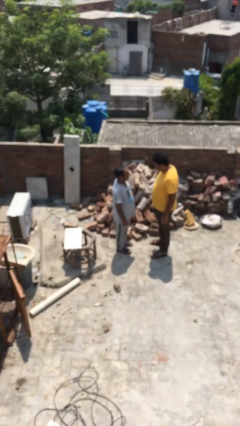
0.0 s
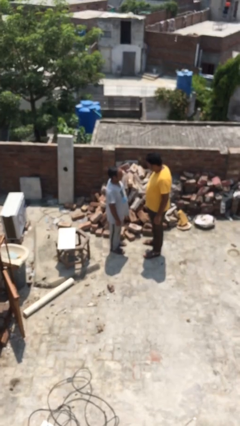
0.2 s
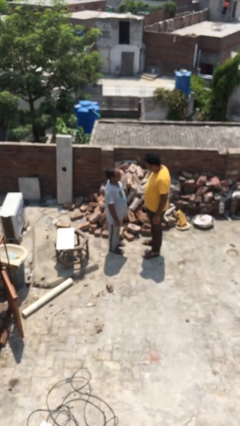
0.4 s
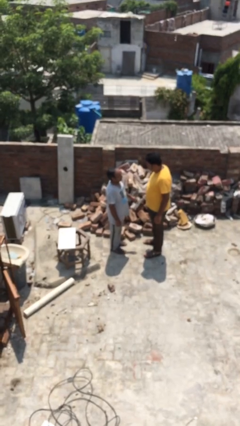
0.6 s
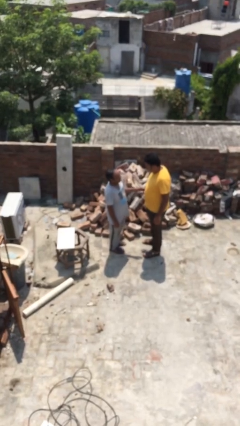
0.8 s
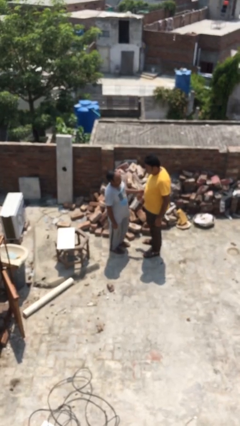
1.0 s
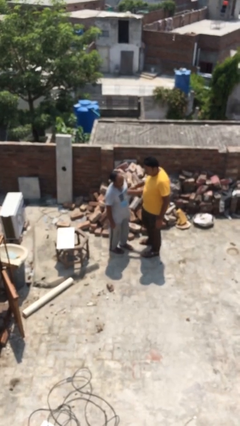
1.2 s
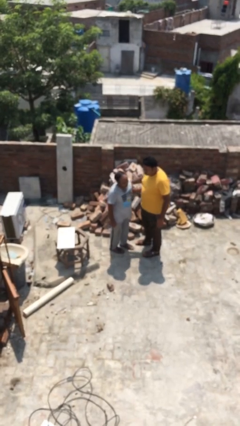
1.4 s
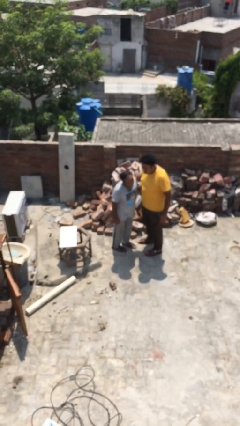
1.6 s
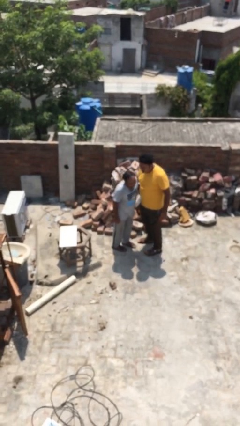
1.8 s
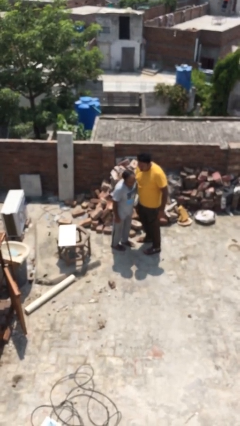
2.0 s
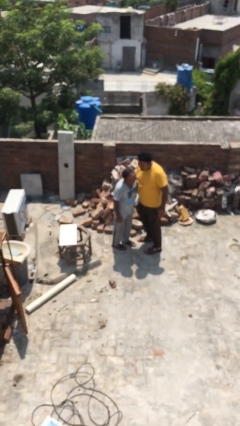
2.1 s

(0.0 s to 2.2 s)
person embraces person

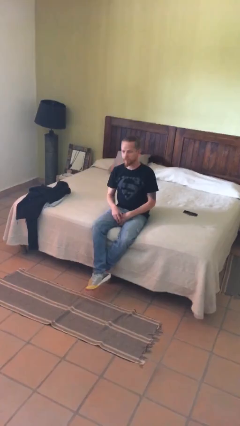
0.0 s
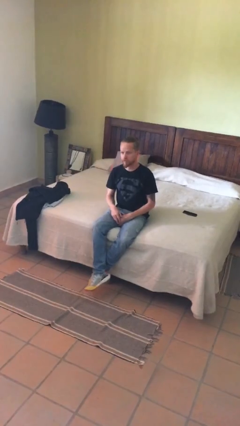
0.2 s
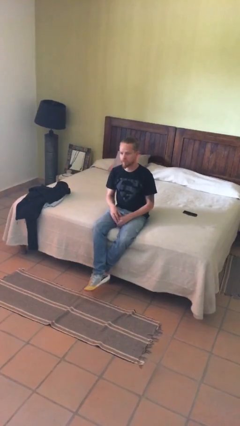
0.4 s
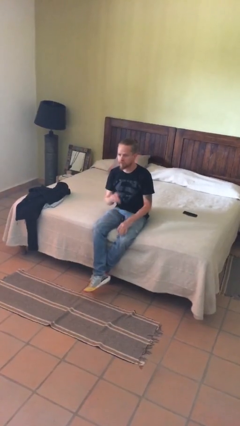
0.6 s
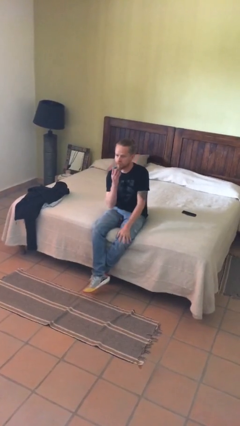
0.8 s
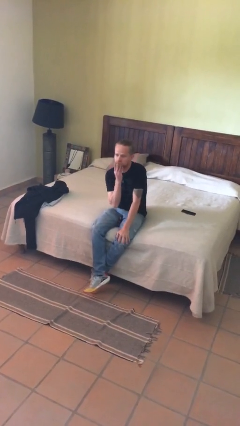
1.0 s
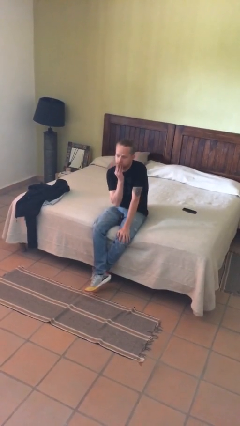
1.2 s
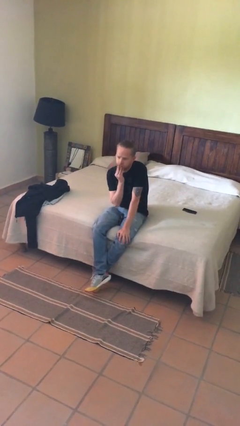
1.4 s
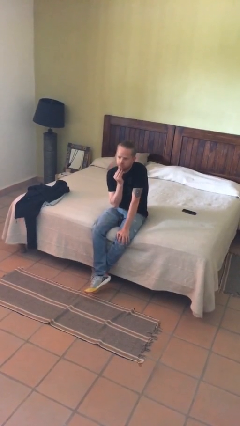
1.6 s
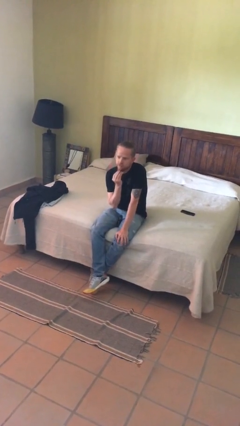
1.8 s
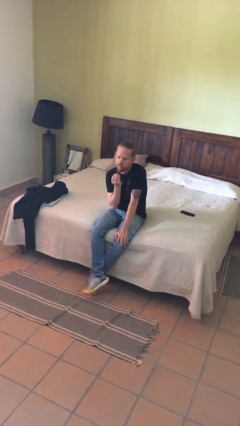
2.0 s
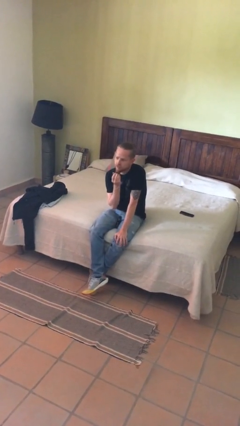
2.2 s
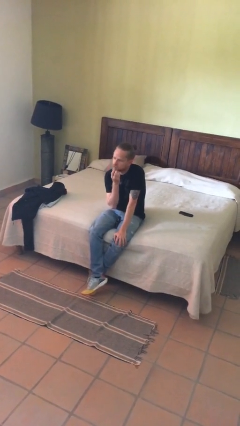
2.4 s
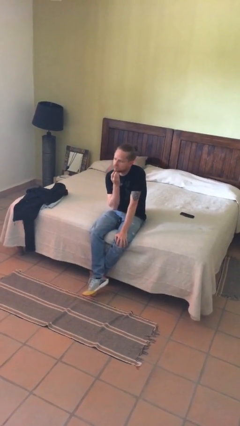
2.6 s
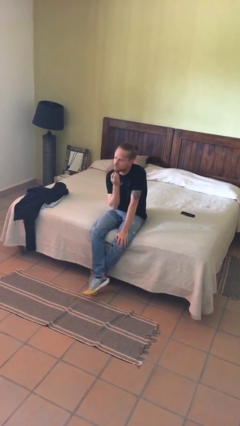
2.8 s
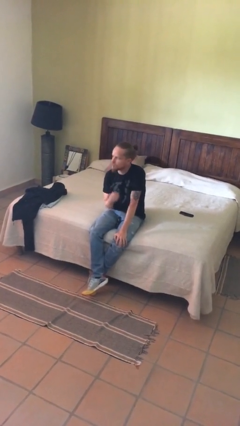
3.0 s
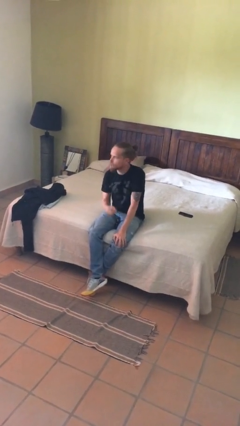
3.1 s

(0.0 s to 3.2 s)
person strokes chin

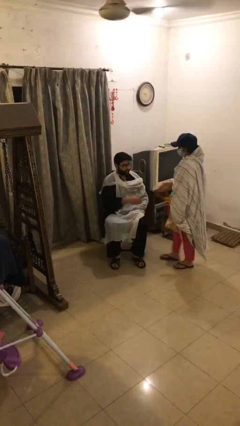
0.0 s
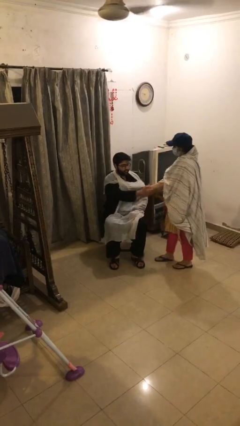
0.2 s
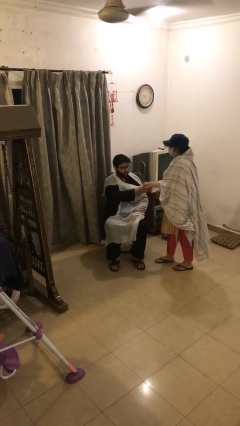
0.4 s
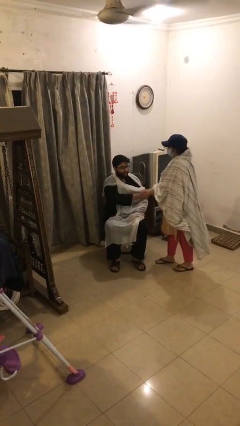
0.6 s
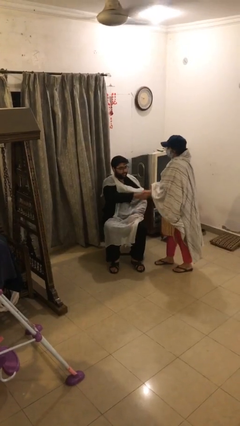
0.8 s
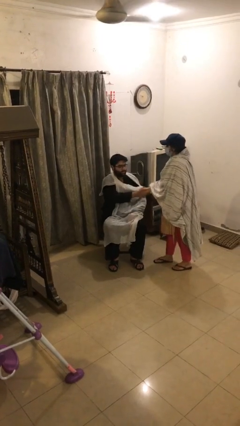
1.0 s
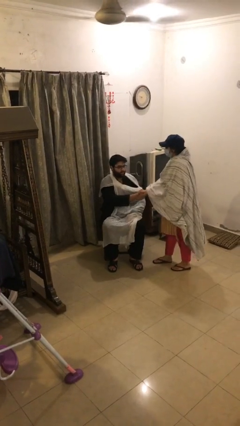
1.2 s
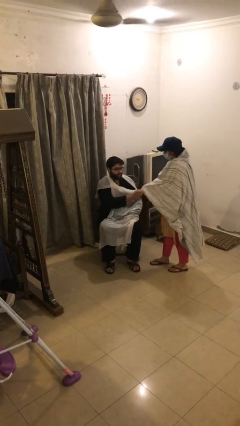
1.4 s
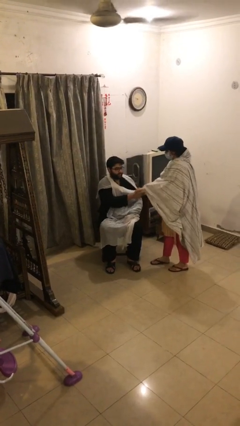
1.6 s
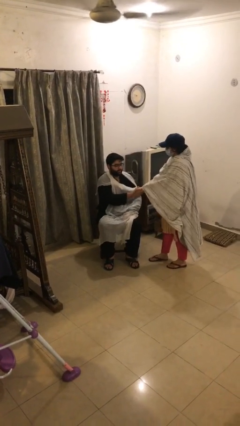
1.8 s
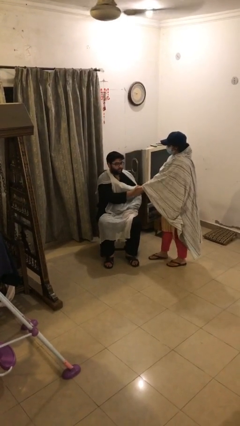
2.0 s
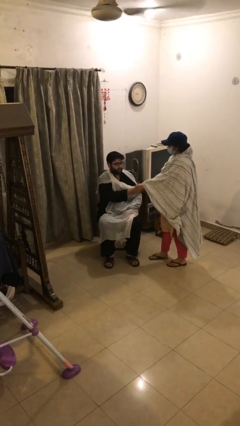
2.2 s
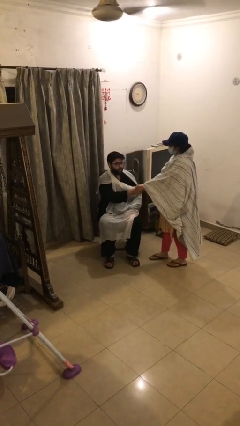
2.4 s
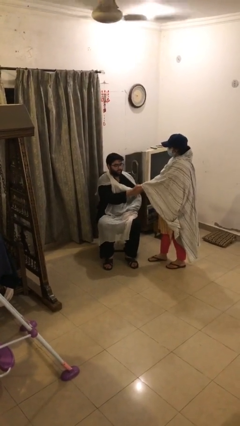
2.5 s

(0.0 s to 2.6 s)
person shakes hand

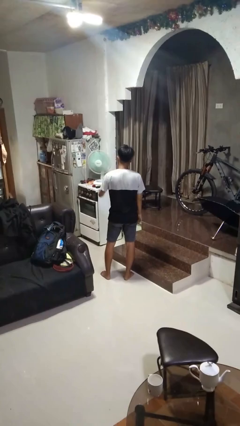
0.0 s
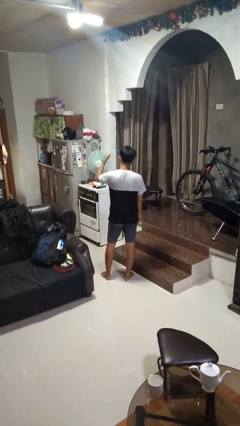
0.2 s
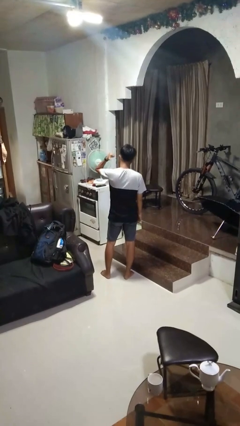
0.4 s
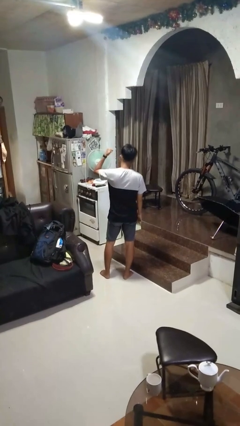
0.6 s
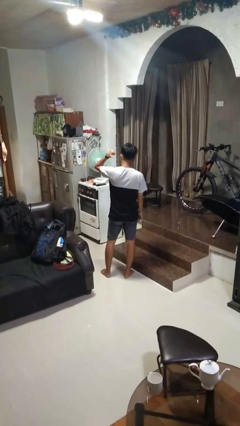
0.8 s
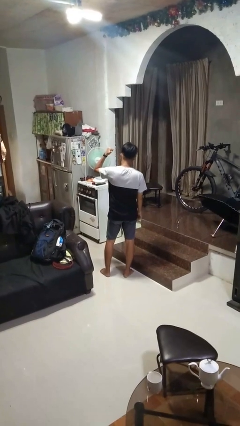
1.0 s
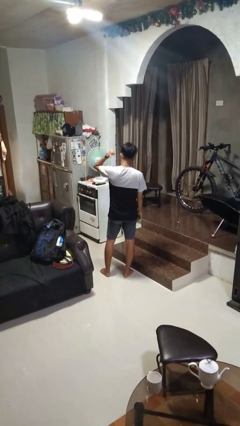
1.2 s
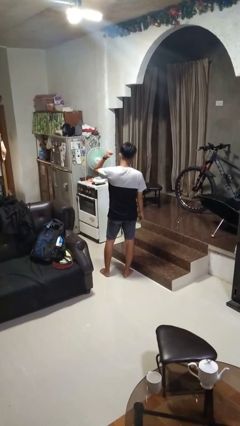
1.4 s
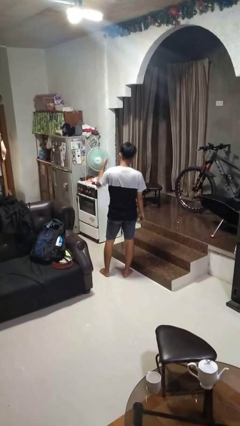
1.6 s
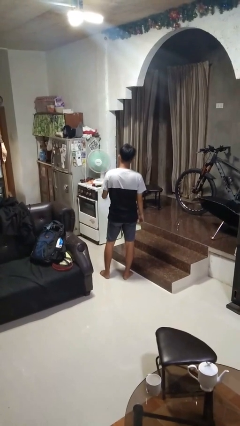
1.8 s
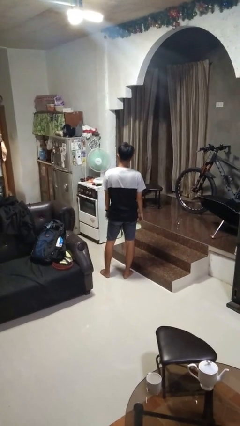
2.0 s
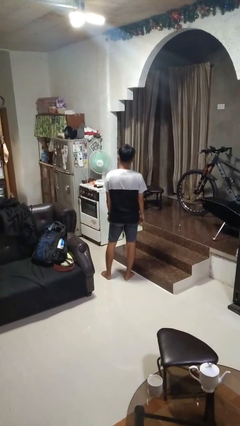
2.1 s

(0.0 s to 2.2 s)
person gestures behind me

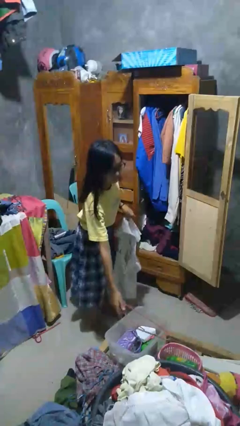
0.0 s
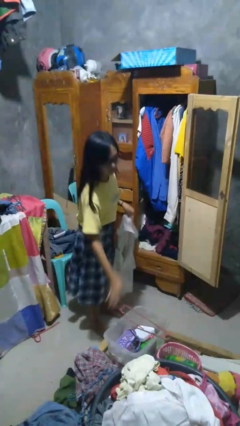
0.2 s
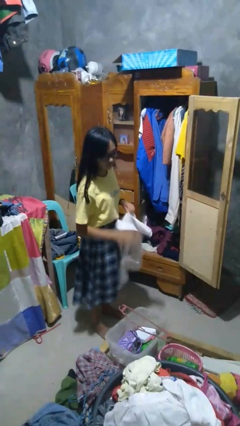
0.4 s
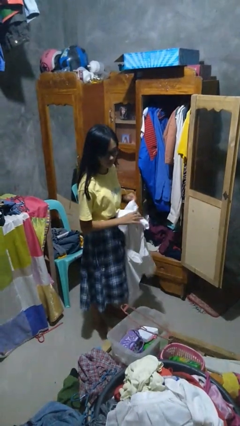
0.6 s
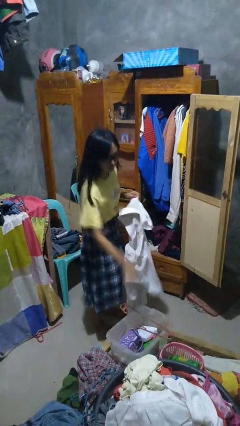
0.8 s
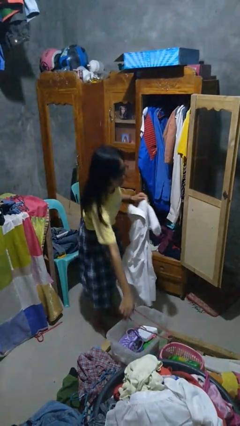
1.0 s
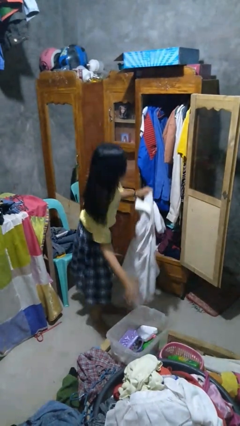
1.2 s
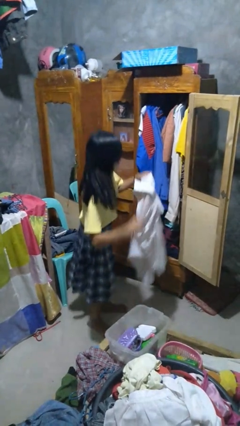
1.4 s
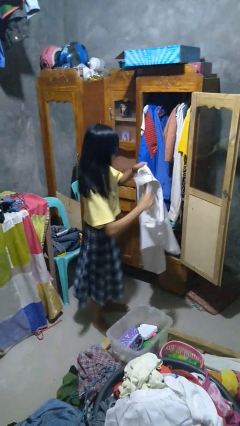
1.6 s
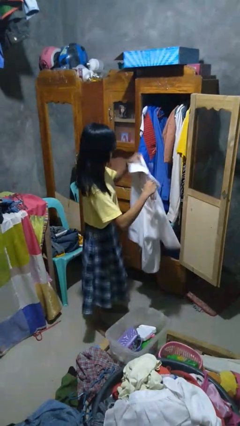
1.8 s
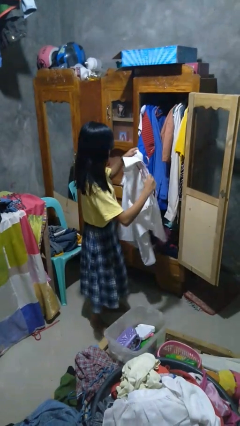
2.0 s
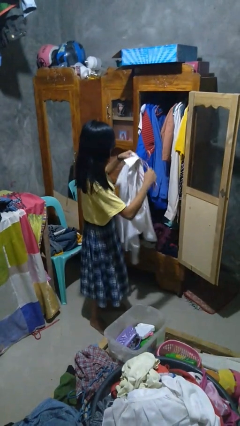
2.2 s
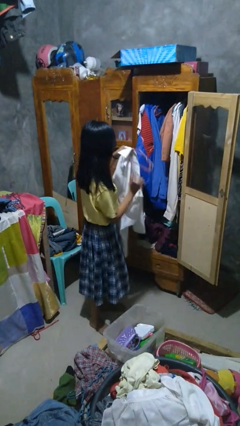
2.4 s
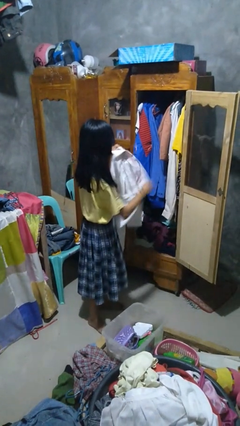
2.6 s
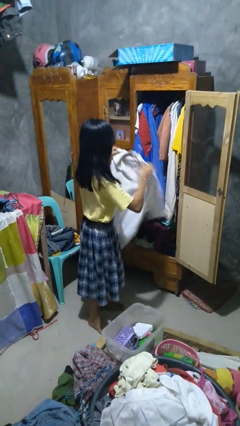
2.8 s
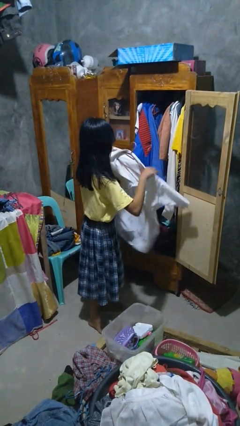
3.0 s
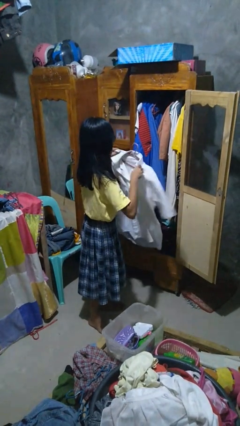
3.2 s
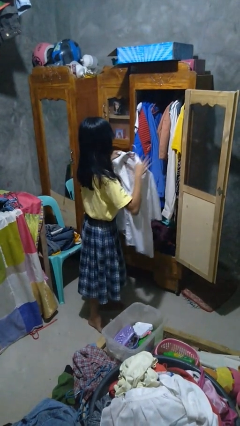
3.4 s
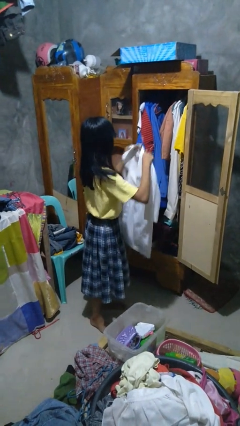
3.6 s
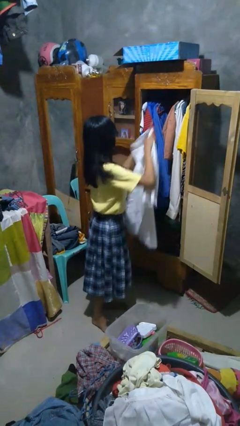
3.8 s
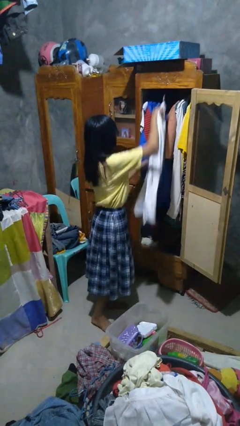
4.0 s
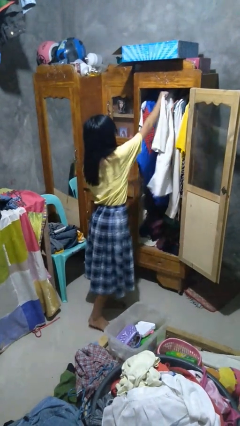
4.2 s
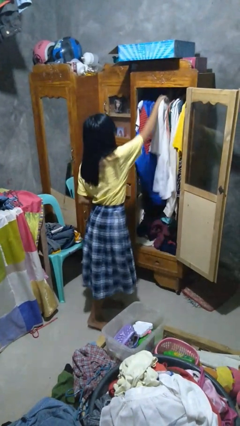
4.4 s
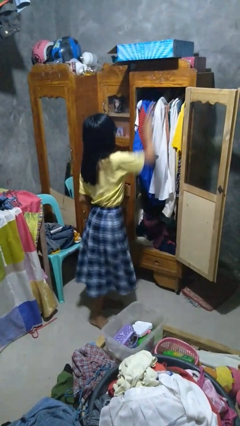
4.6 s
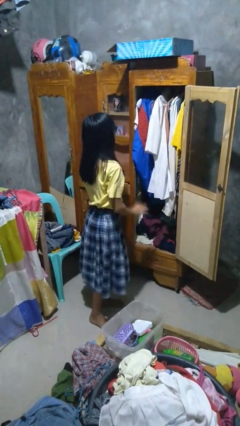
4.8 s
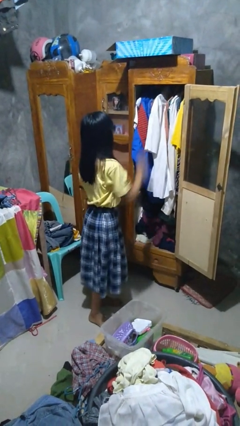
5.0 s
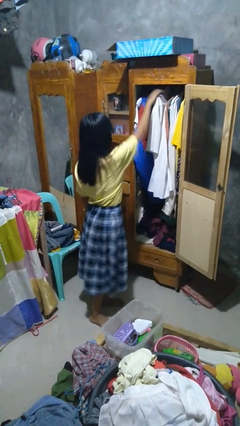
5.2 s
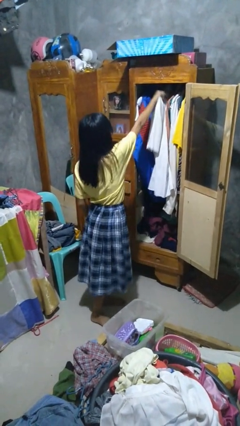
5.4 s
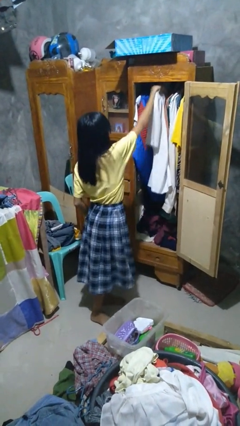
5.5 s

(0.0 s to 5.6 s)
person puts clothes into closet

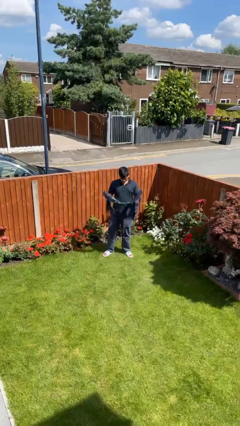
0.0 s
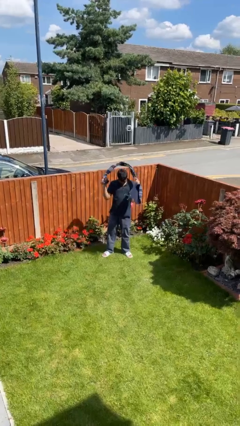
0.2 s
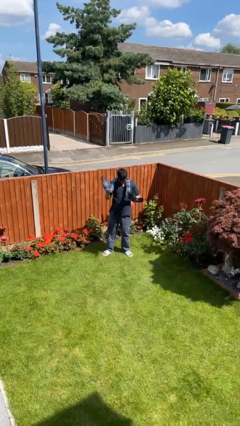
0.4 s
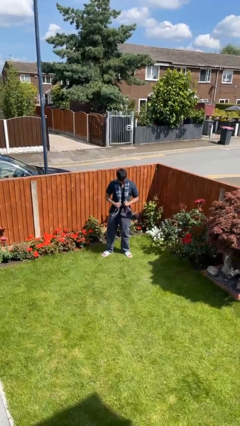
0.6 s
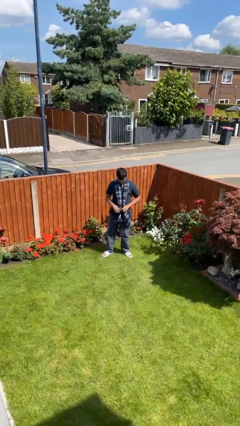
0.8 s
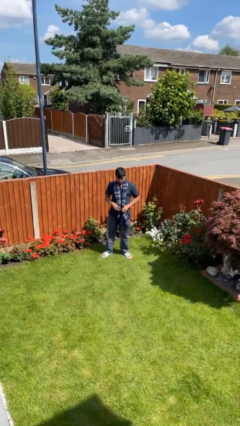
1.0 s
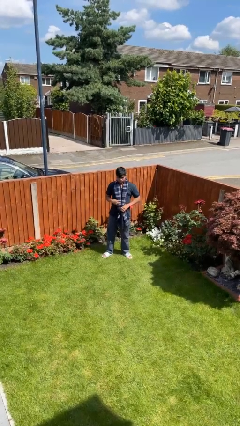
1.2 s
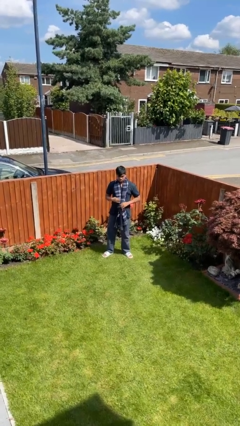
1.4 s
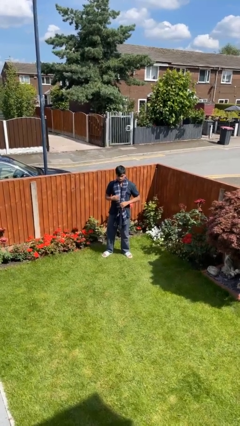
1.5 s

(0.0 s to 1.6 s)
person puts on scarf

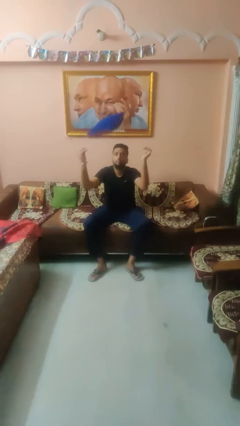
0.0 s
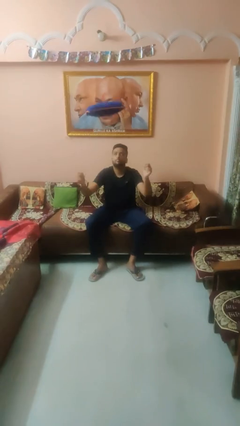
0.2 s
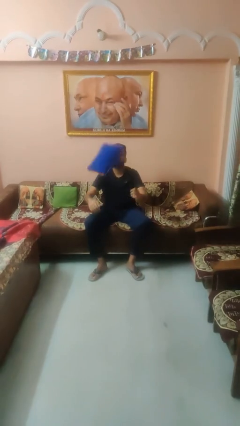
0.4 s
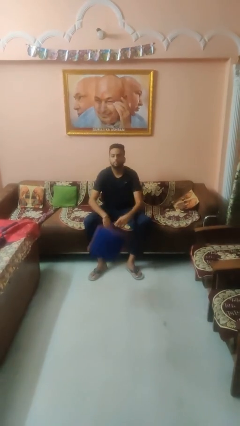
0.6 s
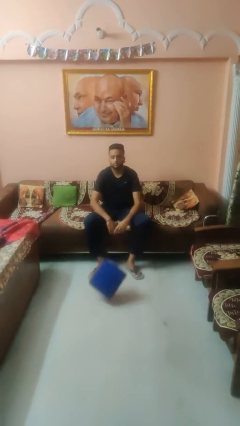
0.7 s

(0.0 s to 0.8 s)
person throws object into air
